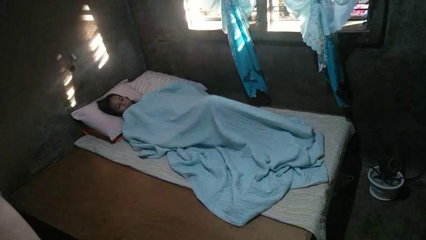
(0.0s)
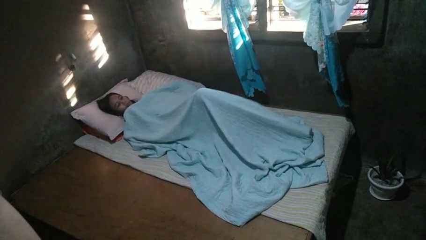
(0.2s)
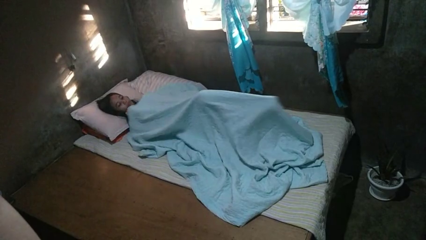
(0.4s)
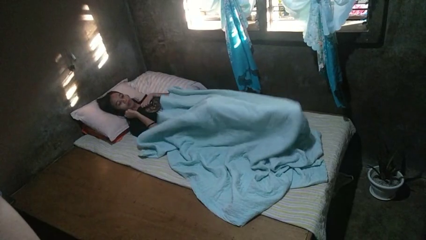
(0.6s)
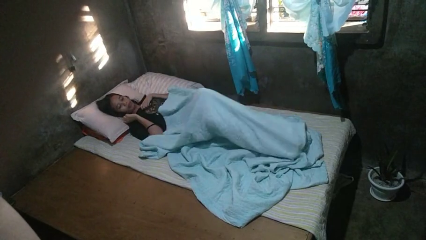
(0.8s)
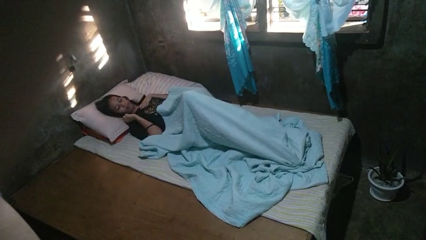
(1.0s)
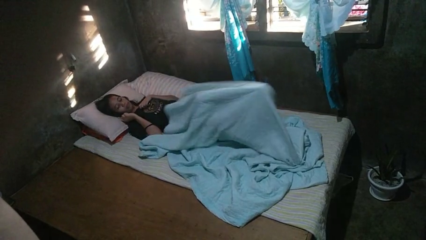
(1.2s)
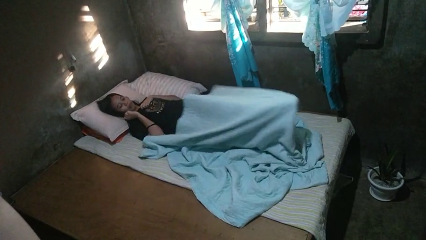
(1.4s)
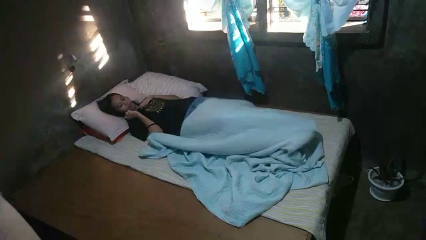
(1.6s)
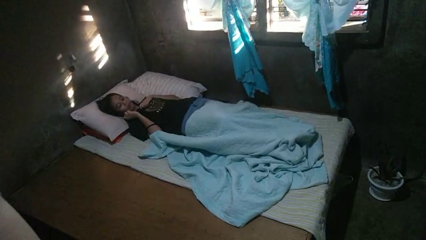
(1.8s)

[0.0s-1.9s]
person uncovers with bedsheets

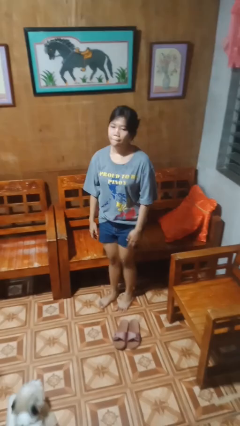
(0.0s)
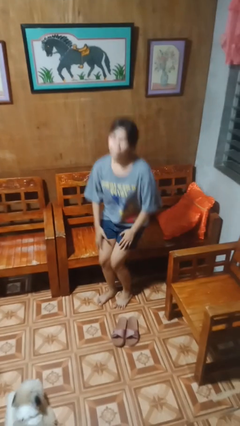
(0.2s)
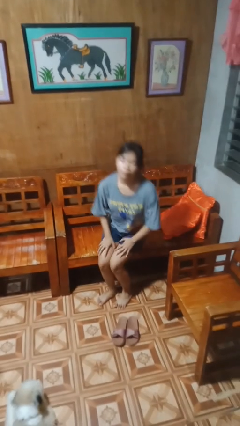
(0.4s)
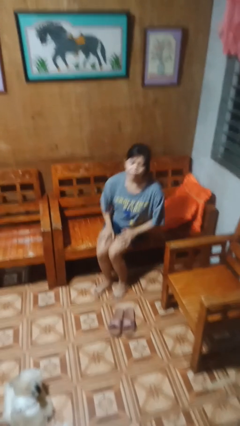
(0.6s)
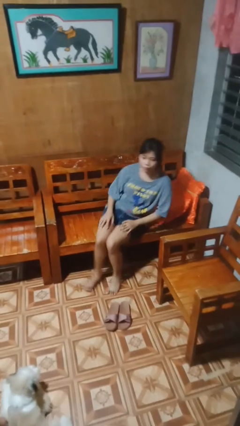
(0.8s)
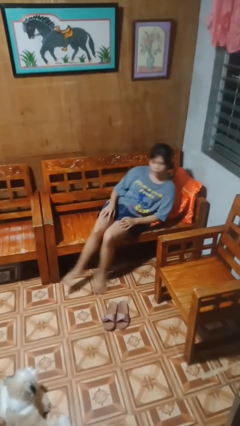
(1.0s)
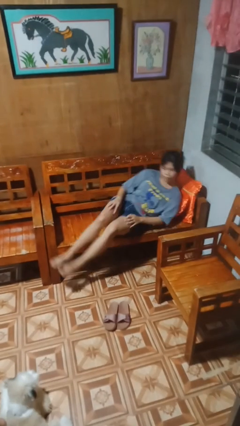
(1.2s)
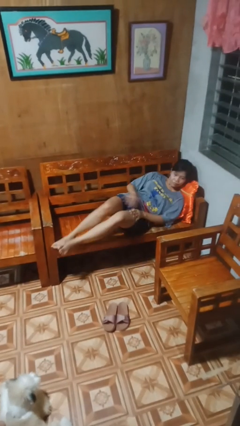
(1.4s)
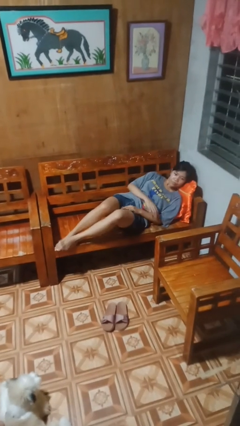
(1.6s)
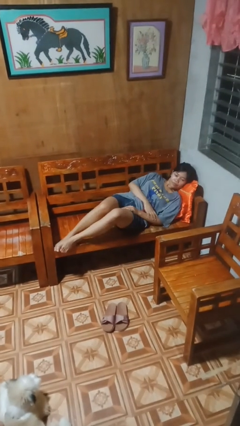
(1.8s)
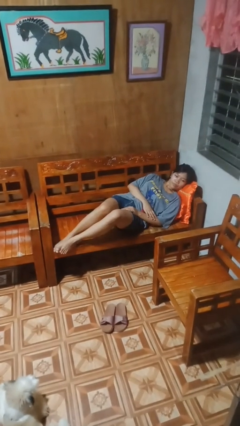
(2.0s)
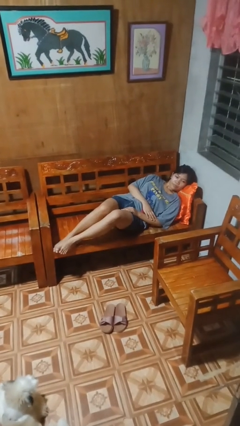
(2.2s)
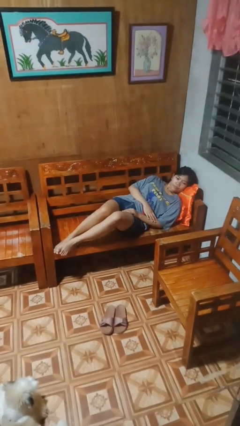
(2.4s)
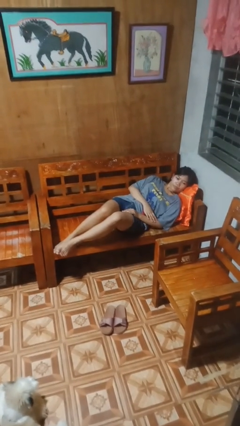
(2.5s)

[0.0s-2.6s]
person lies down on couch

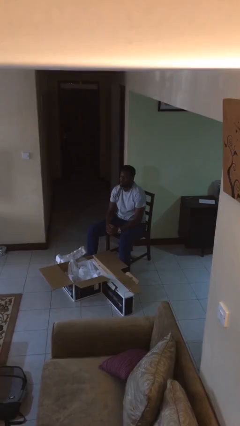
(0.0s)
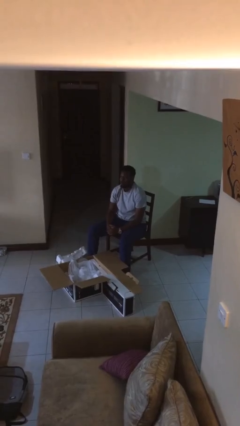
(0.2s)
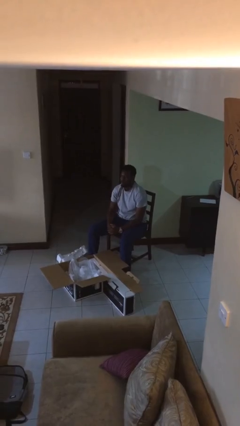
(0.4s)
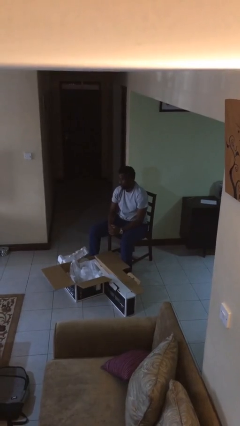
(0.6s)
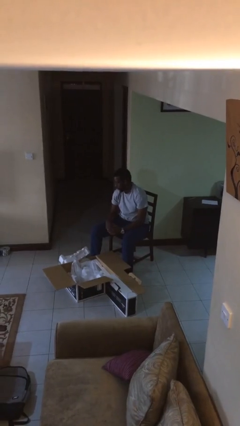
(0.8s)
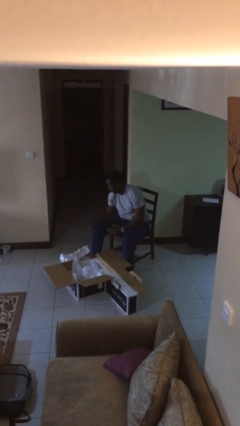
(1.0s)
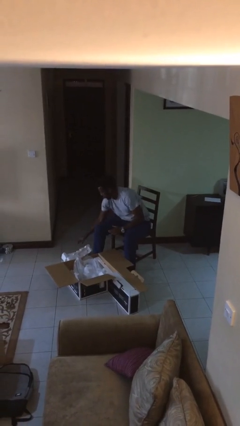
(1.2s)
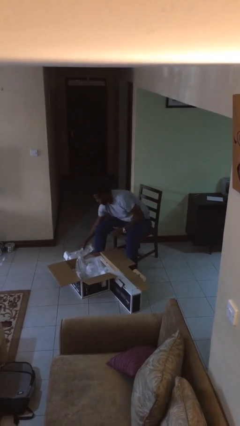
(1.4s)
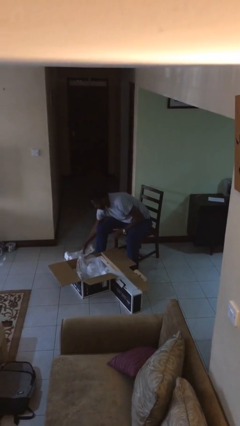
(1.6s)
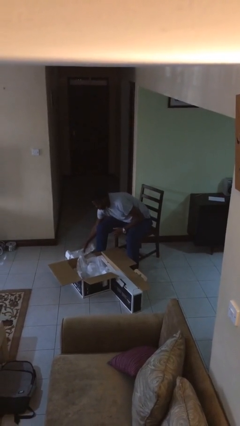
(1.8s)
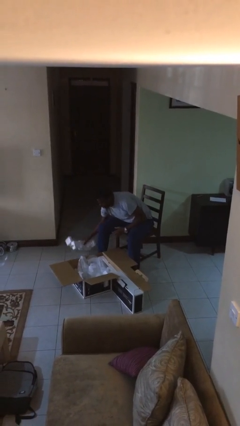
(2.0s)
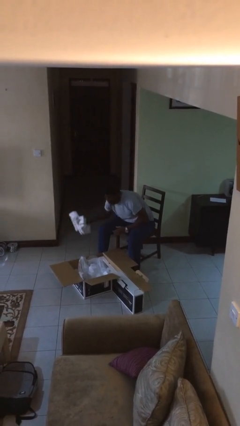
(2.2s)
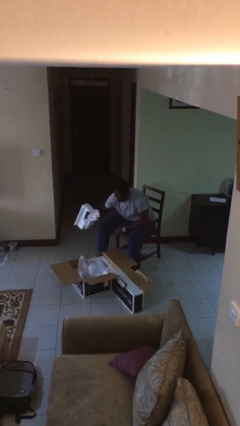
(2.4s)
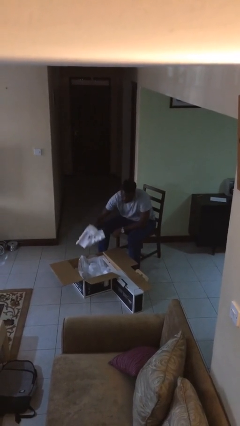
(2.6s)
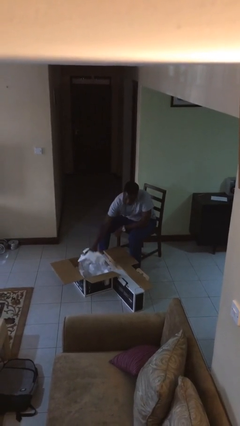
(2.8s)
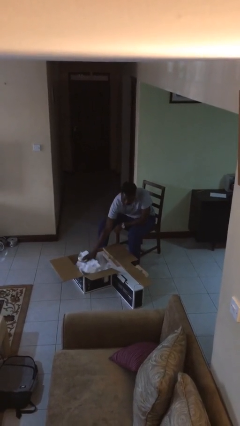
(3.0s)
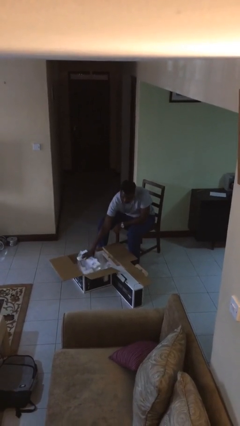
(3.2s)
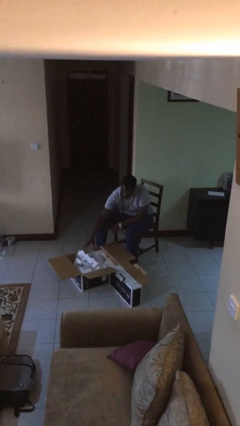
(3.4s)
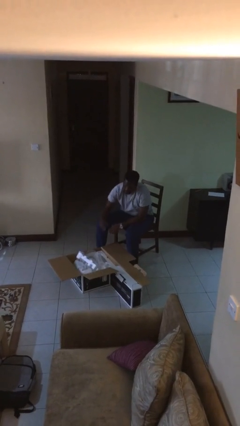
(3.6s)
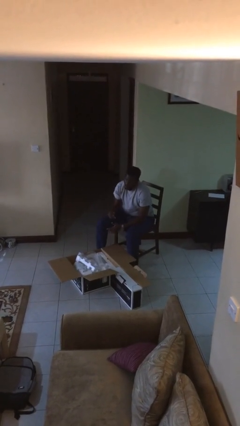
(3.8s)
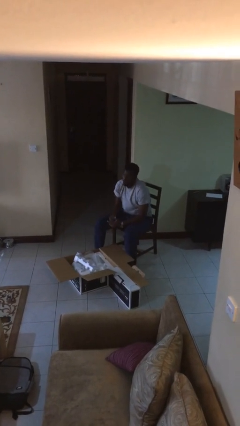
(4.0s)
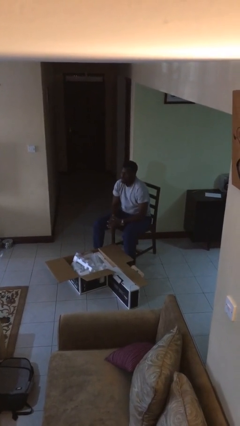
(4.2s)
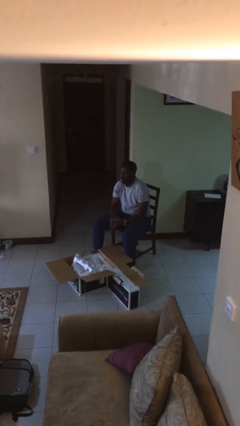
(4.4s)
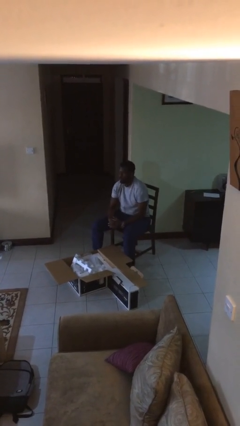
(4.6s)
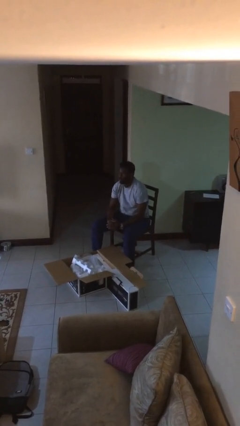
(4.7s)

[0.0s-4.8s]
person puts object into box

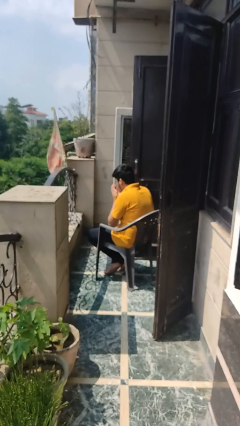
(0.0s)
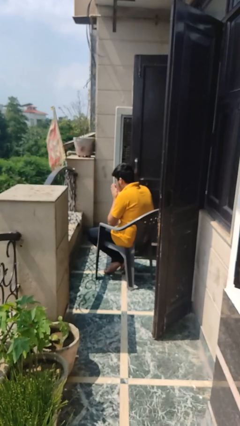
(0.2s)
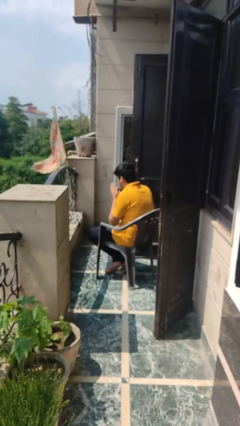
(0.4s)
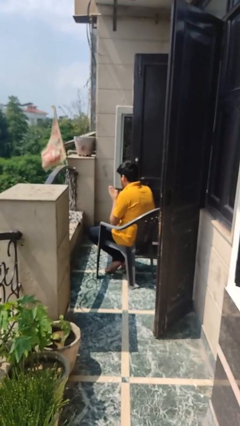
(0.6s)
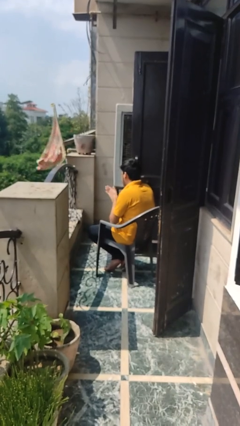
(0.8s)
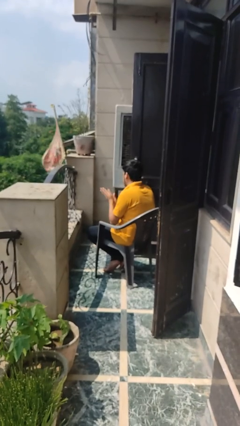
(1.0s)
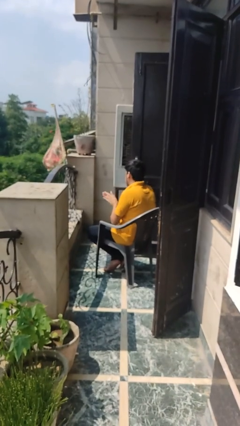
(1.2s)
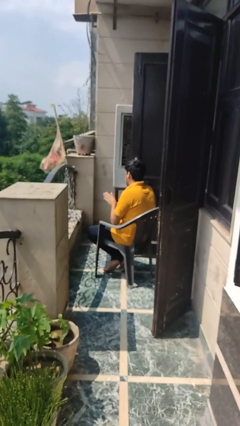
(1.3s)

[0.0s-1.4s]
person blows into hands

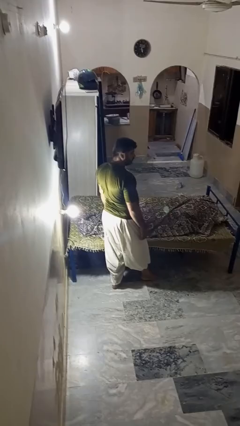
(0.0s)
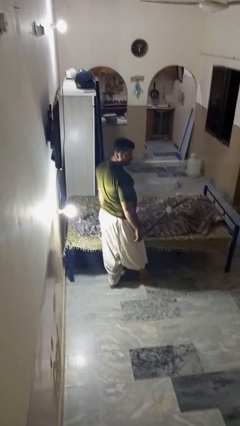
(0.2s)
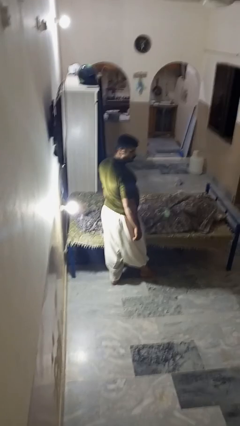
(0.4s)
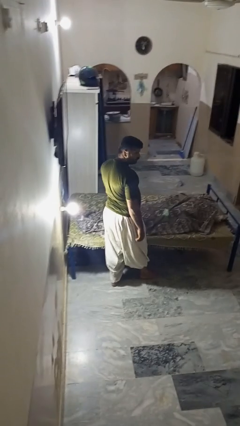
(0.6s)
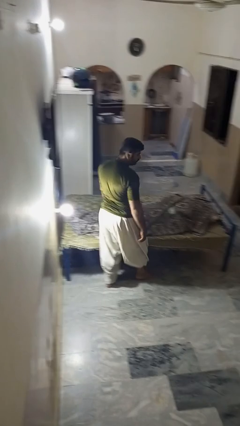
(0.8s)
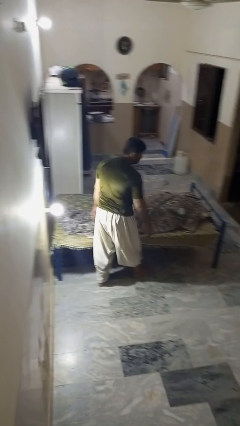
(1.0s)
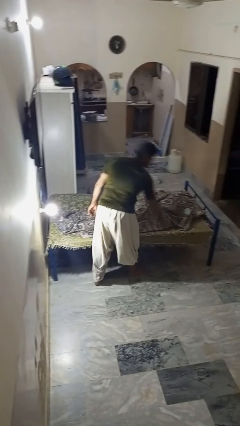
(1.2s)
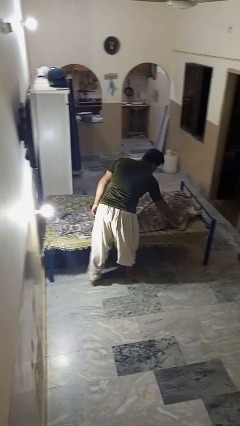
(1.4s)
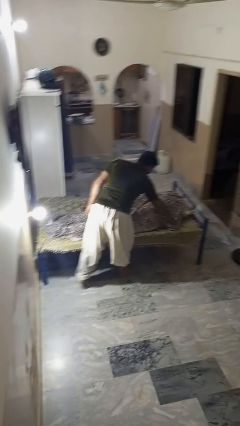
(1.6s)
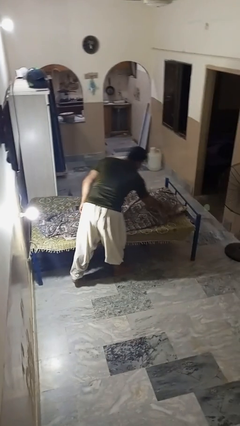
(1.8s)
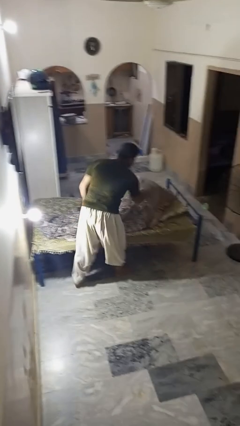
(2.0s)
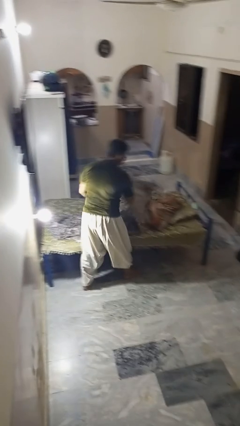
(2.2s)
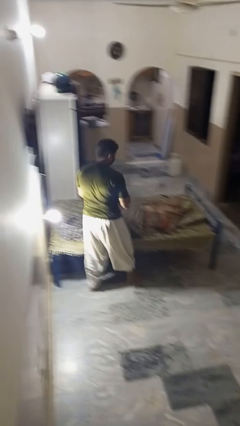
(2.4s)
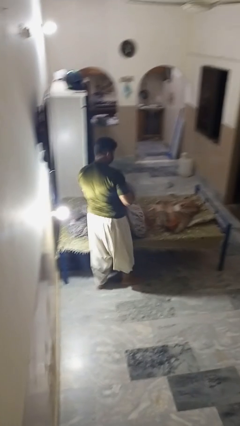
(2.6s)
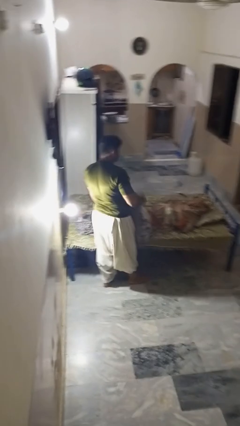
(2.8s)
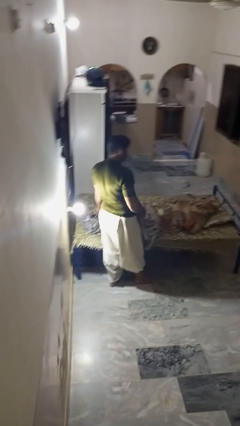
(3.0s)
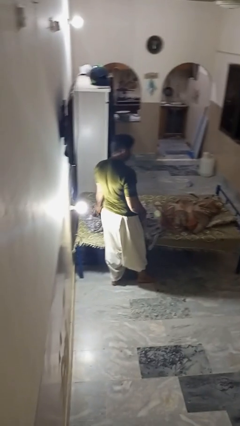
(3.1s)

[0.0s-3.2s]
person uncovers friend with blanket

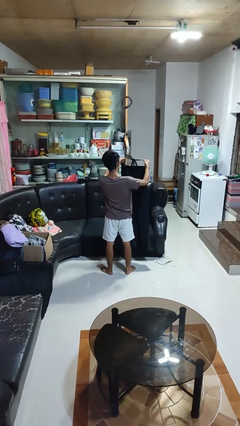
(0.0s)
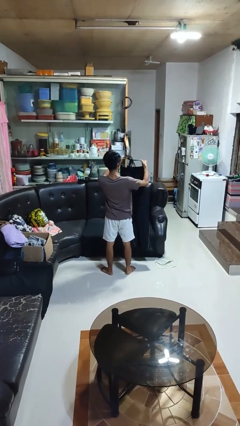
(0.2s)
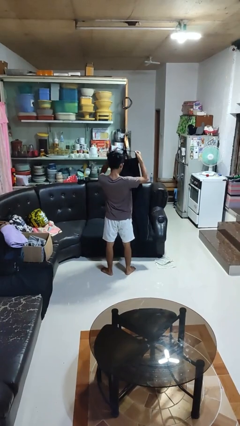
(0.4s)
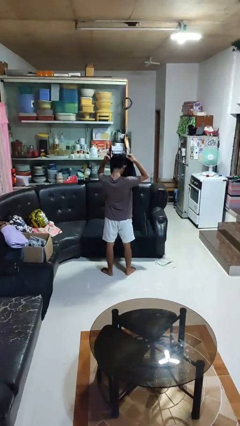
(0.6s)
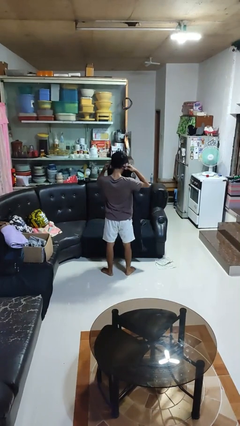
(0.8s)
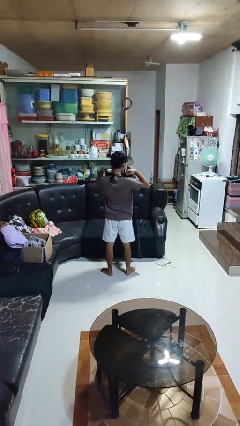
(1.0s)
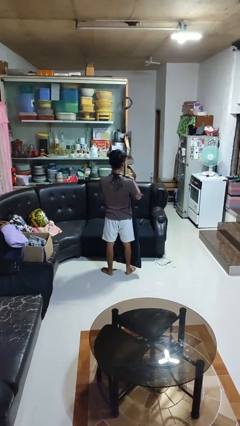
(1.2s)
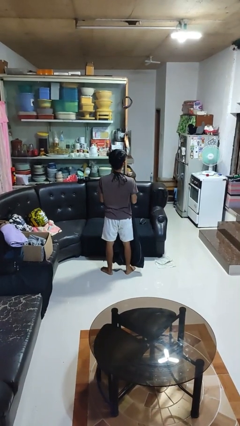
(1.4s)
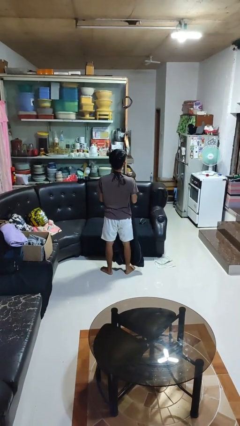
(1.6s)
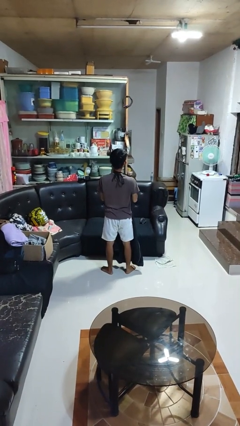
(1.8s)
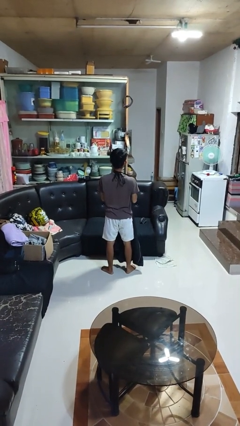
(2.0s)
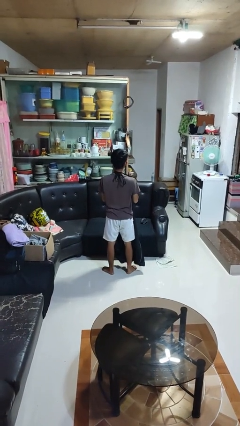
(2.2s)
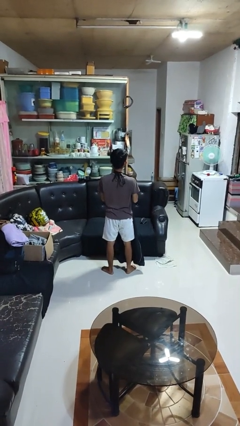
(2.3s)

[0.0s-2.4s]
person puts on apron

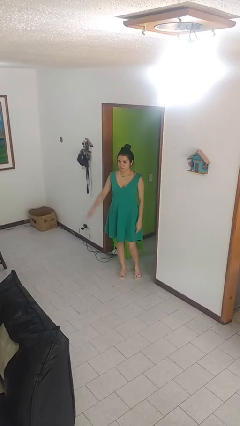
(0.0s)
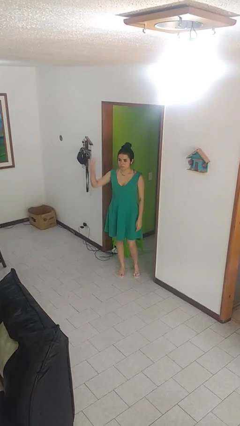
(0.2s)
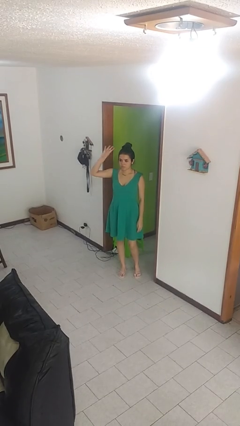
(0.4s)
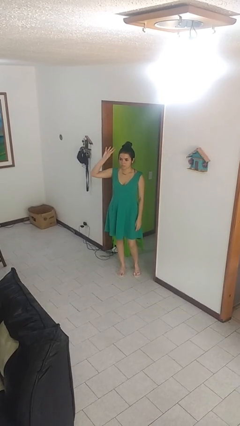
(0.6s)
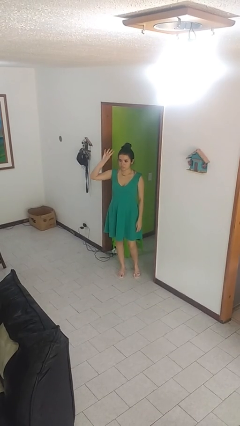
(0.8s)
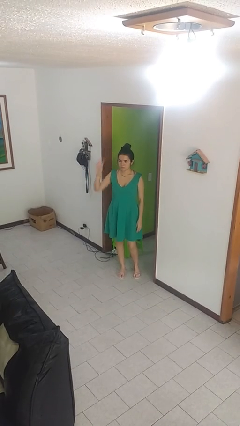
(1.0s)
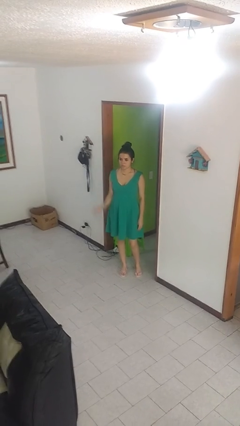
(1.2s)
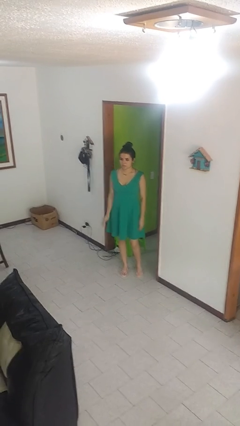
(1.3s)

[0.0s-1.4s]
person gestures number four
